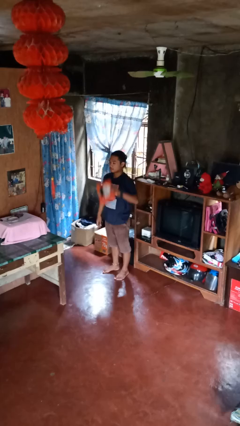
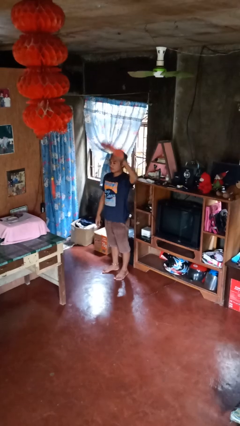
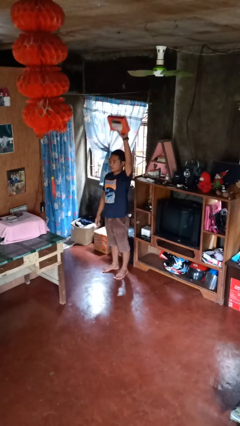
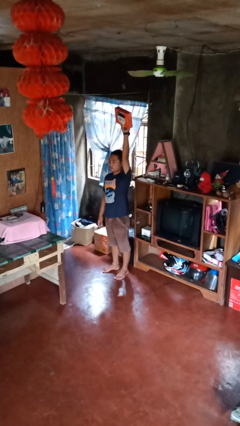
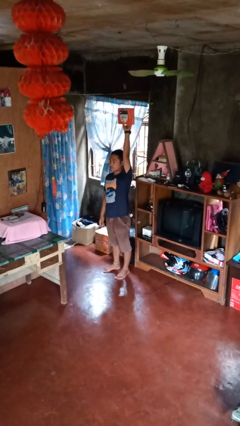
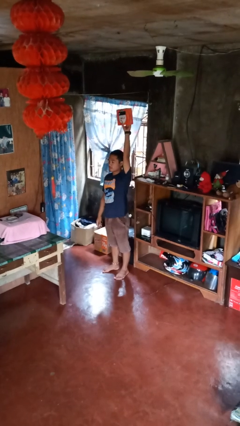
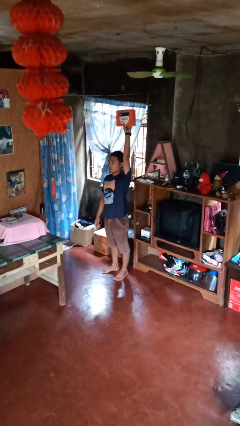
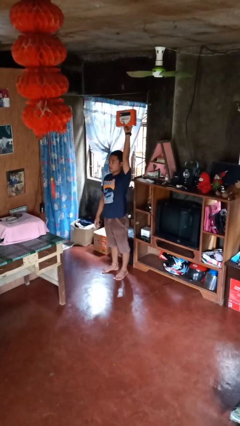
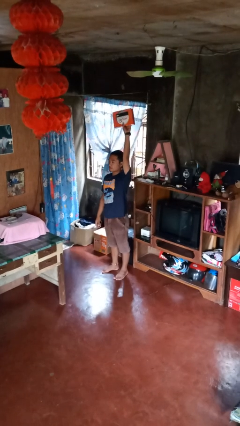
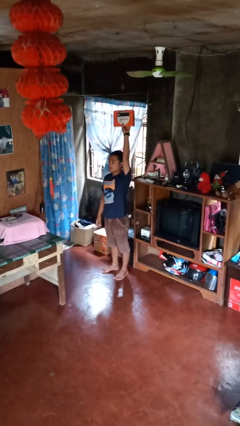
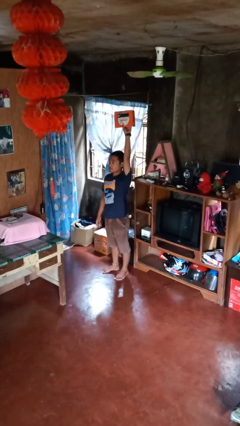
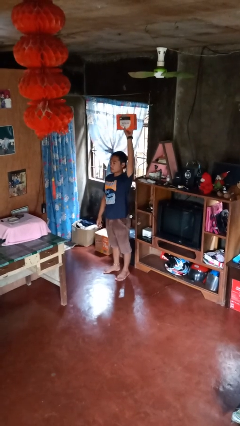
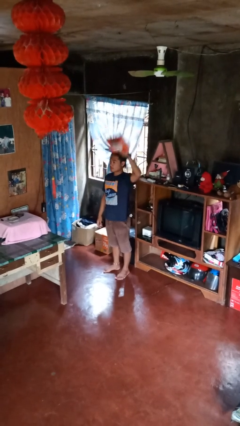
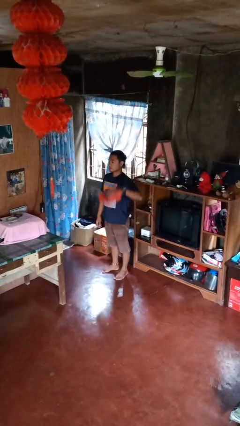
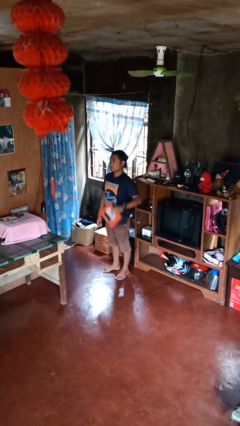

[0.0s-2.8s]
person holds object above head

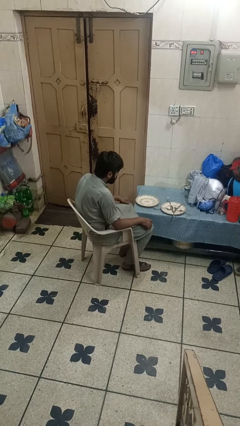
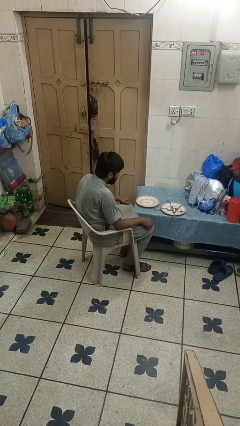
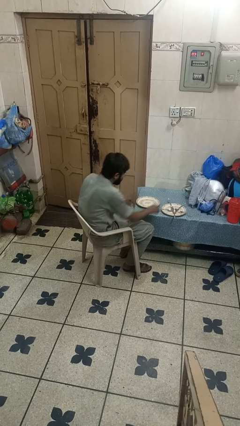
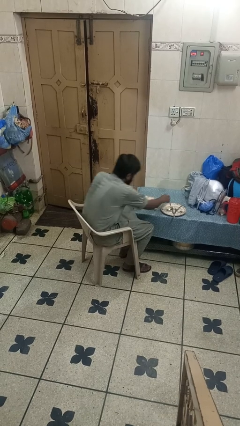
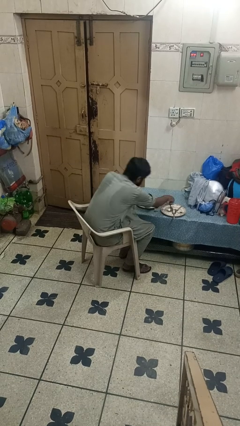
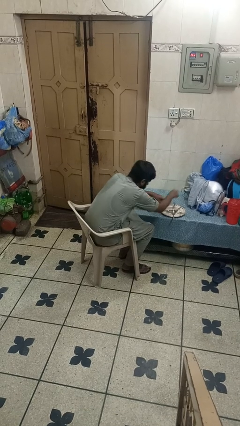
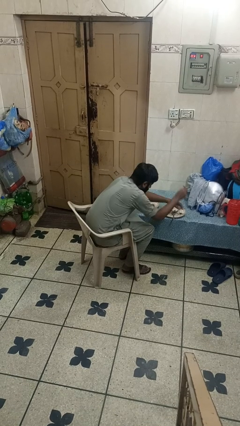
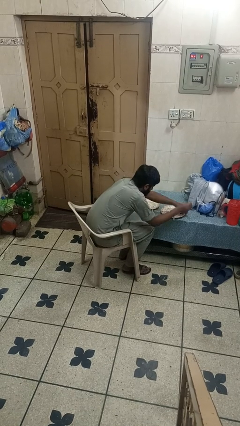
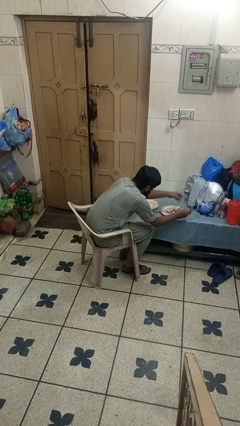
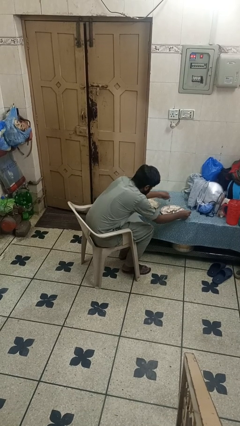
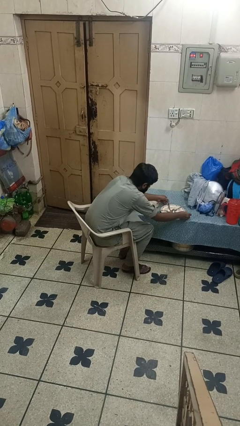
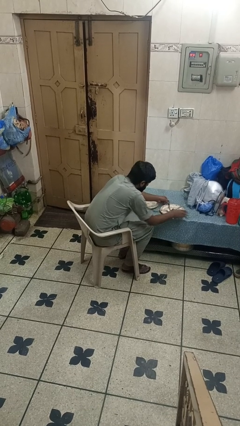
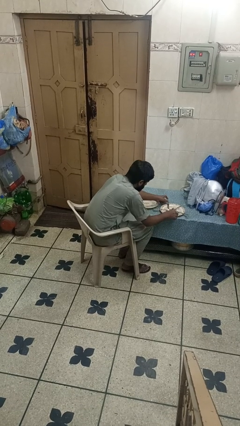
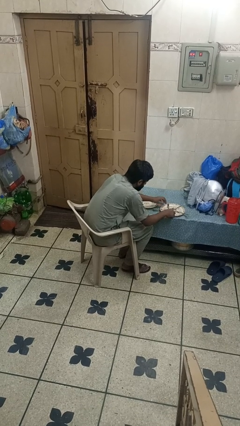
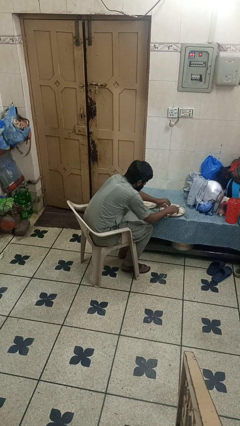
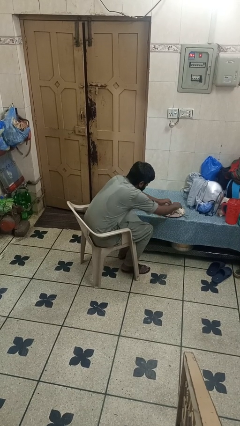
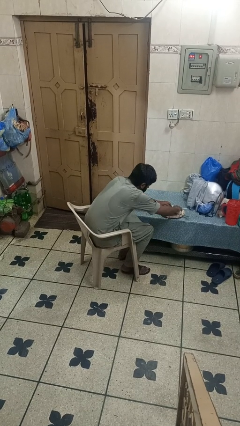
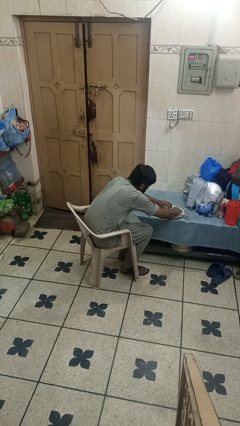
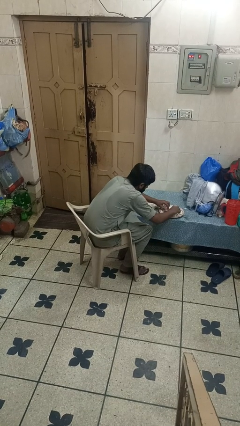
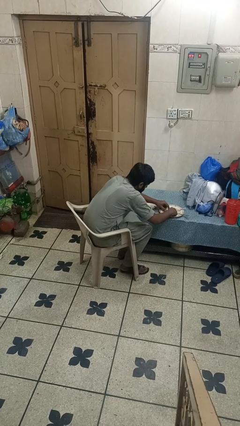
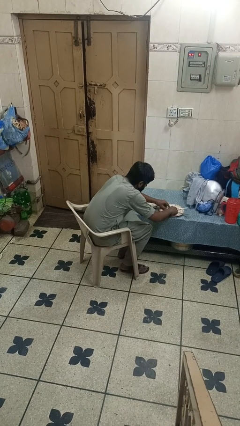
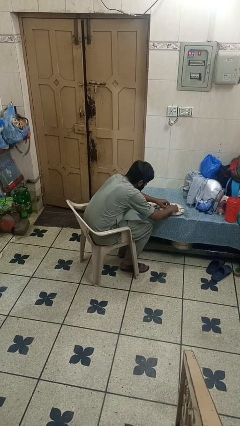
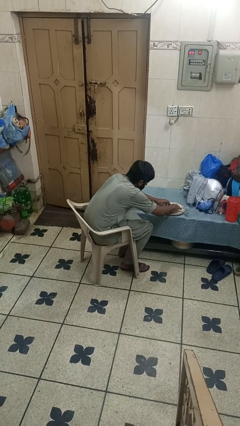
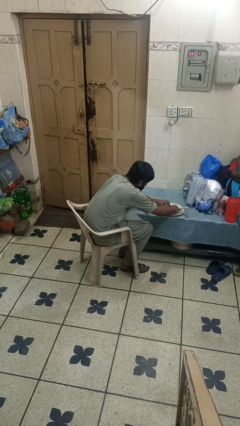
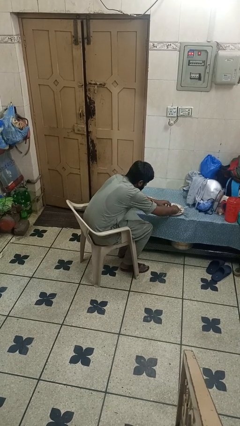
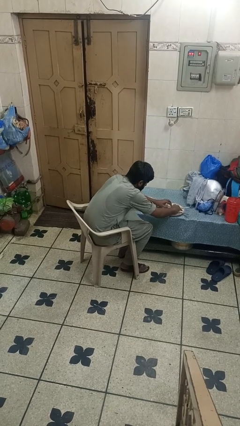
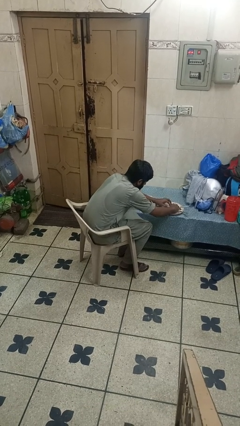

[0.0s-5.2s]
person sets table

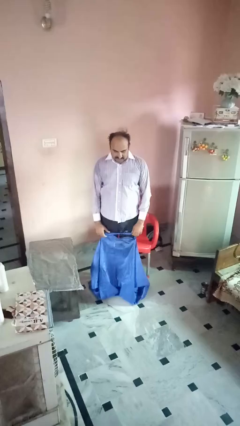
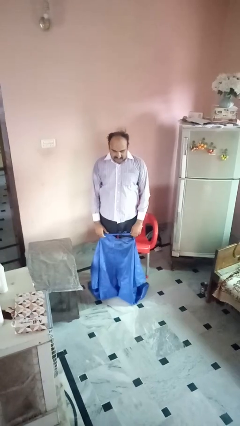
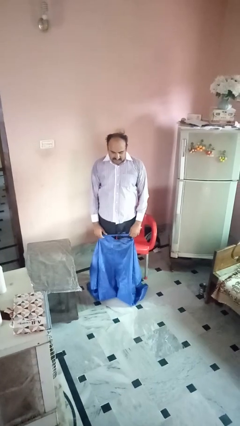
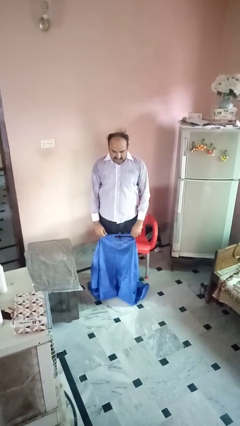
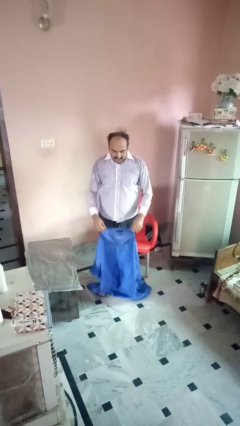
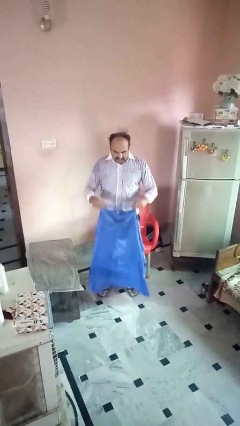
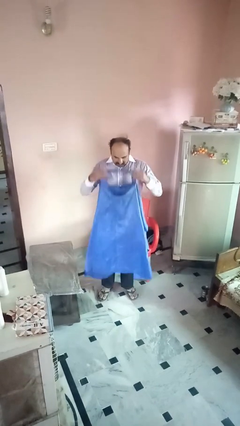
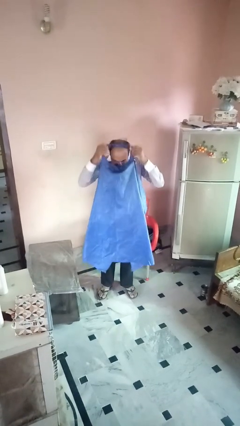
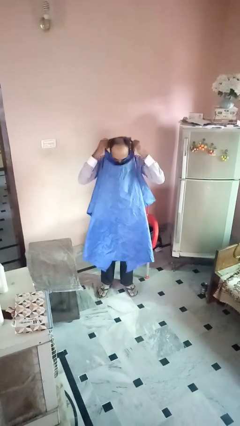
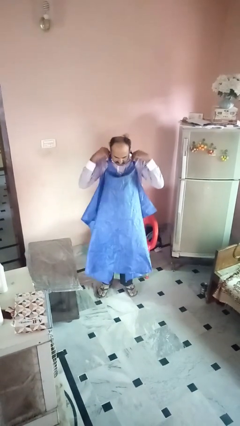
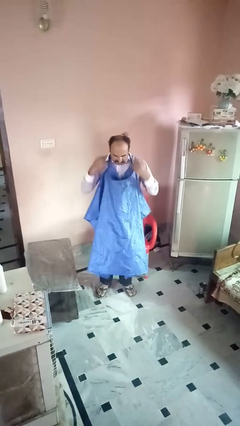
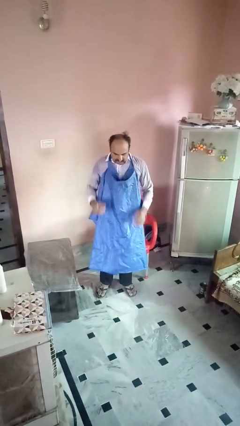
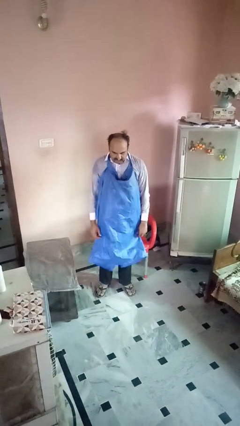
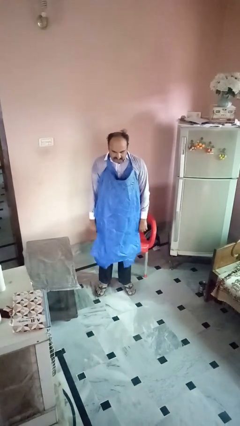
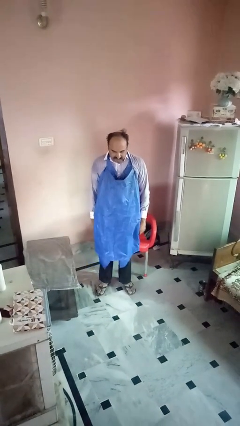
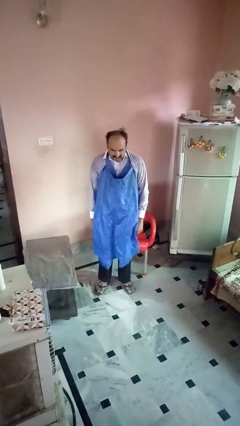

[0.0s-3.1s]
person puts on apron

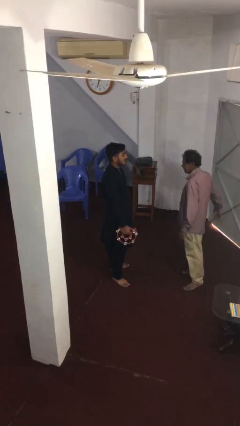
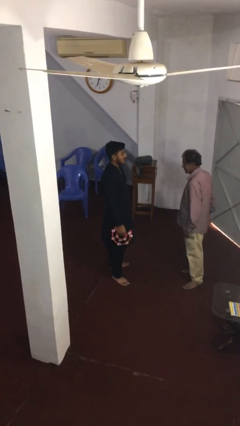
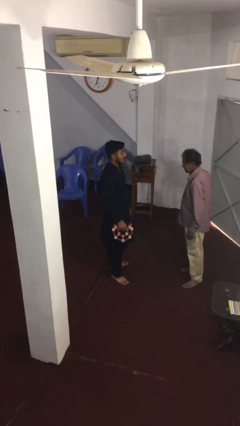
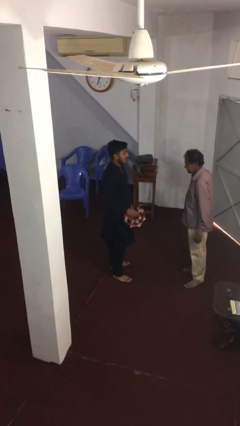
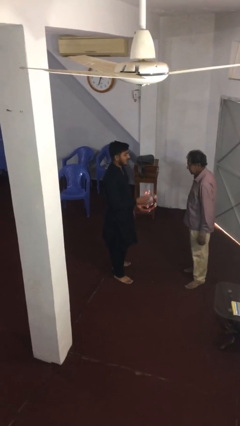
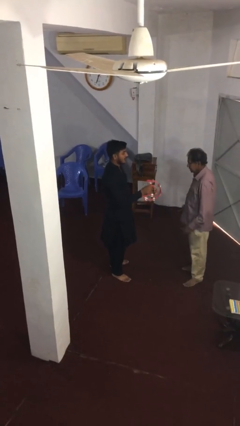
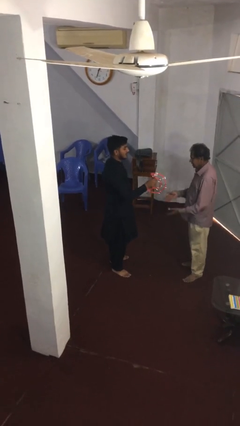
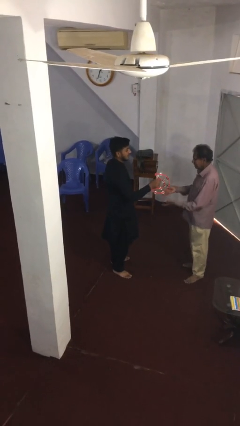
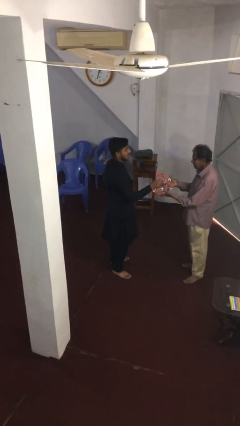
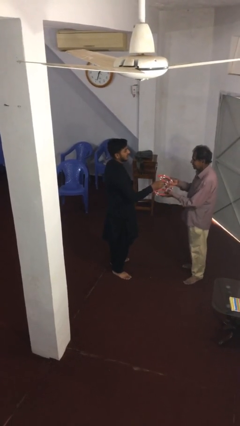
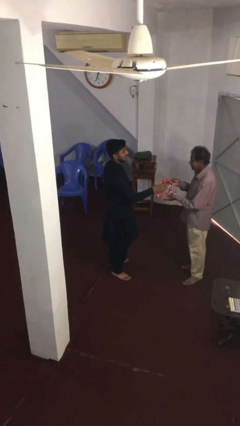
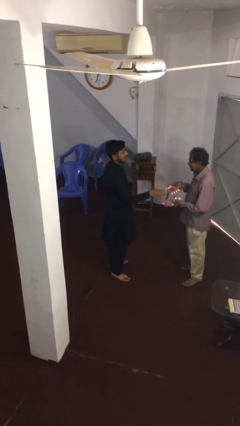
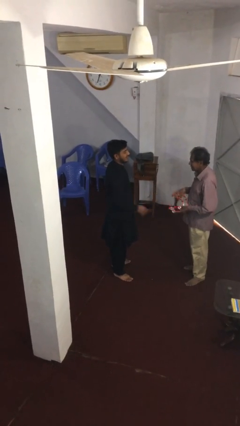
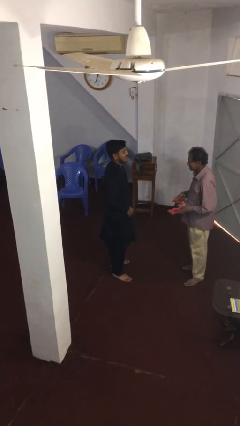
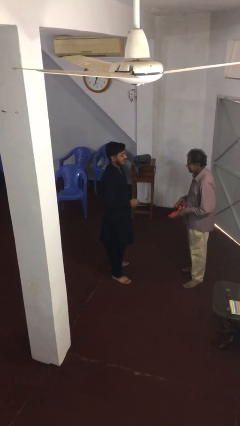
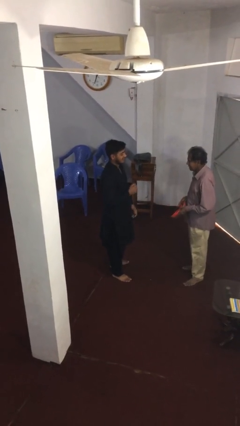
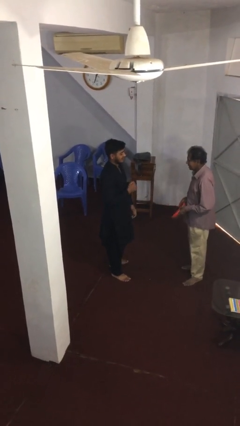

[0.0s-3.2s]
person transfers object to person

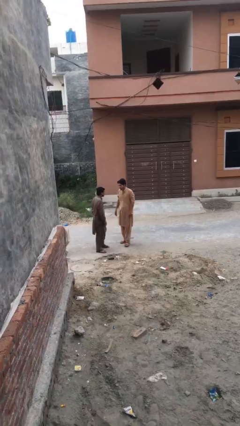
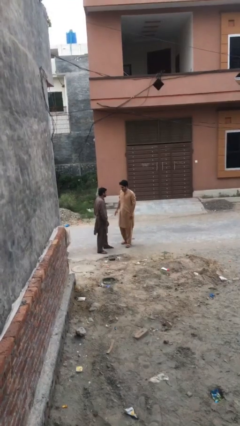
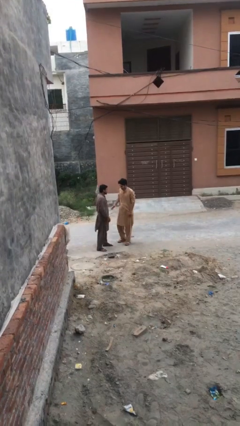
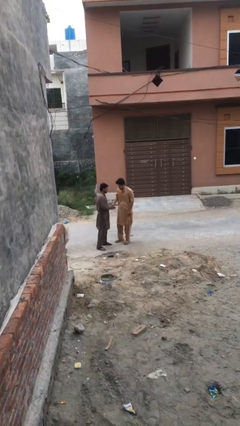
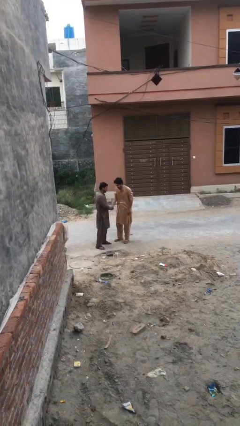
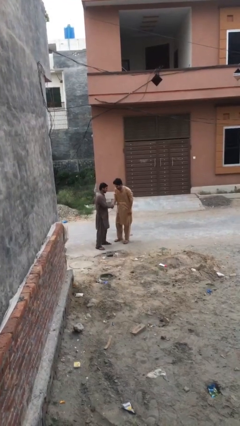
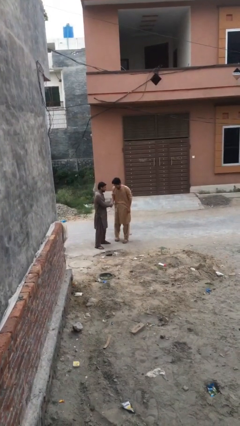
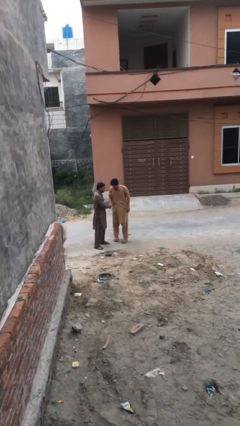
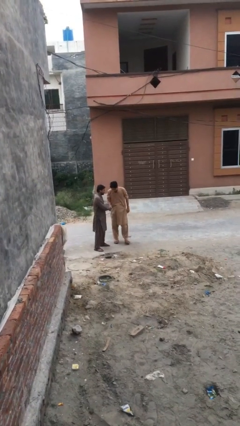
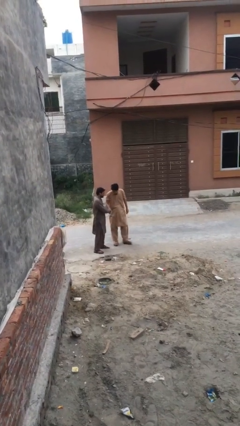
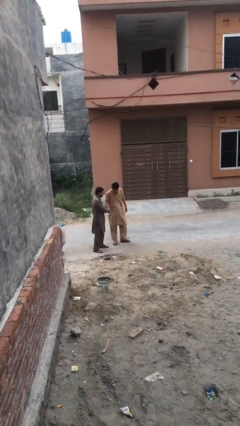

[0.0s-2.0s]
person shakes hand

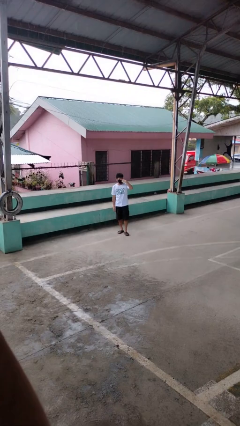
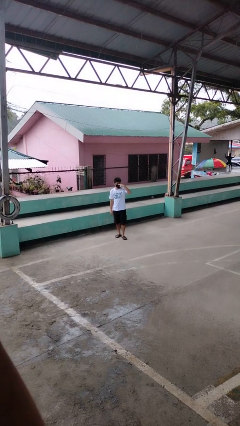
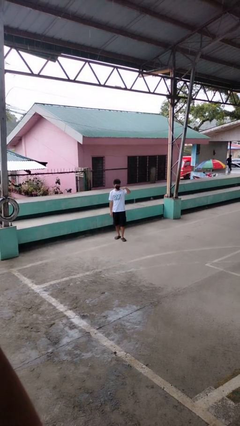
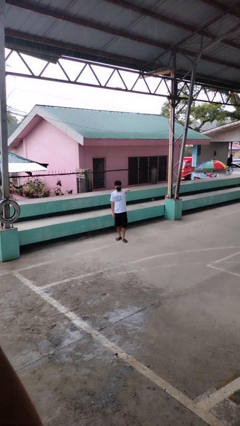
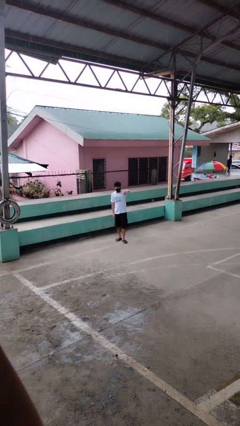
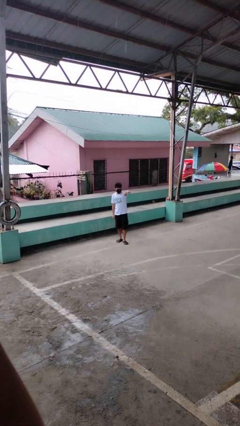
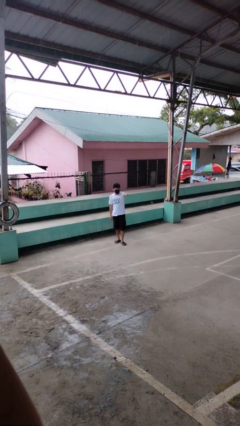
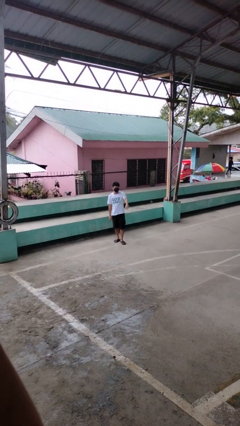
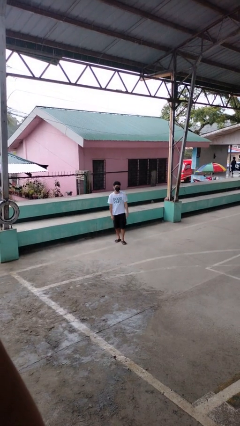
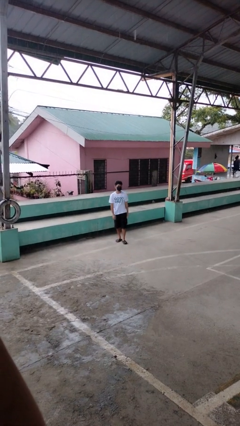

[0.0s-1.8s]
person gestures watch closely
